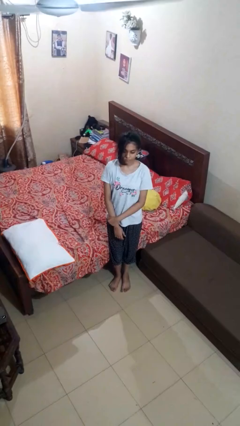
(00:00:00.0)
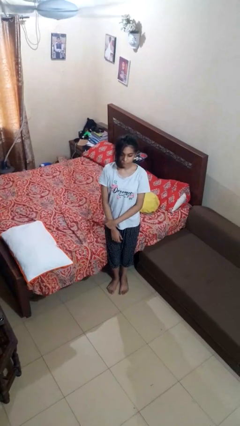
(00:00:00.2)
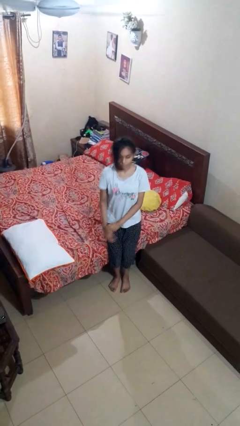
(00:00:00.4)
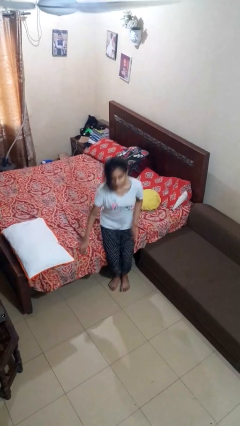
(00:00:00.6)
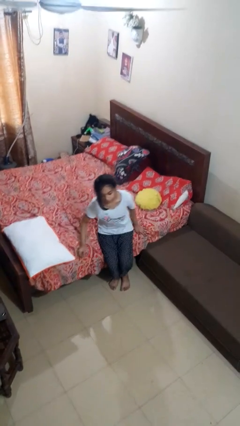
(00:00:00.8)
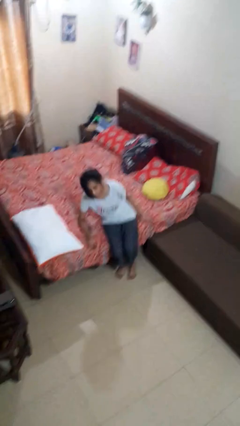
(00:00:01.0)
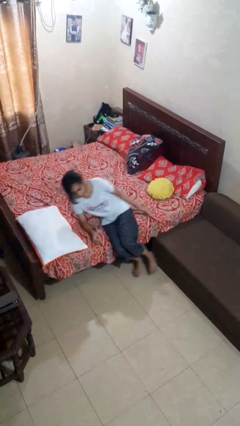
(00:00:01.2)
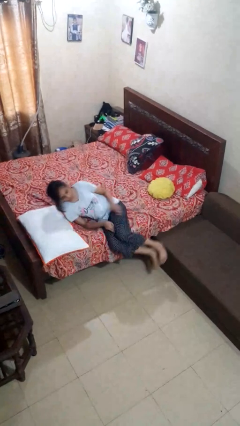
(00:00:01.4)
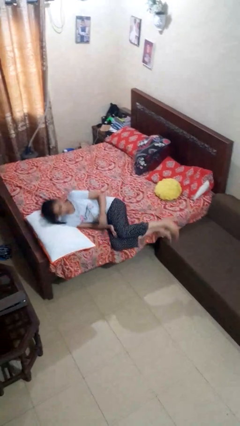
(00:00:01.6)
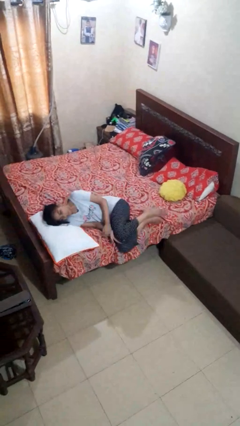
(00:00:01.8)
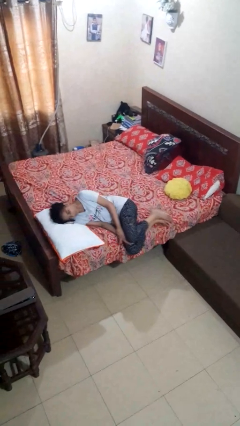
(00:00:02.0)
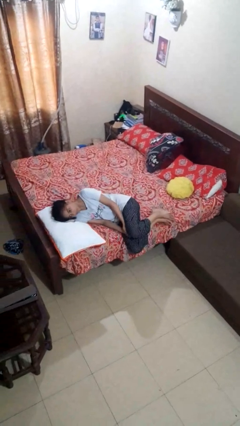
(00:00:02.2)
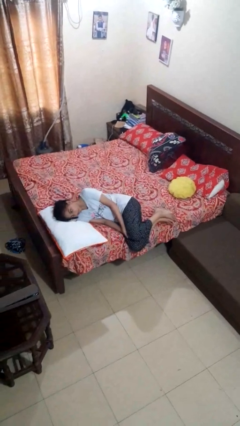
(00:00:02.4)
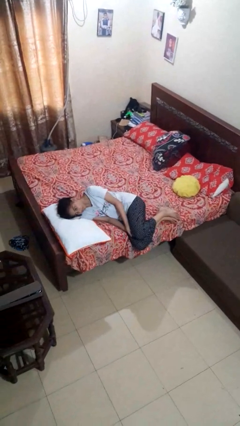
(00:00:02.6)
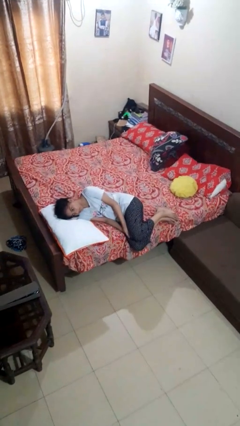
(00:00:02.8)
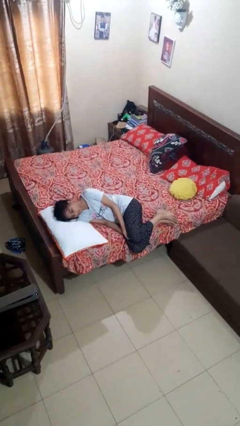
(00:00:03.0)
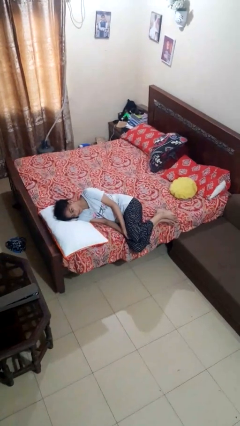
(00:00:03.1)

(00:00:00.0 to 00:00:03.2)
person lies down on bed

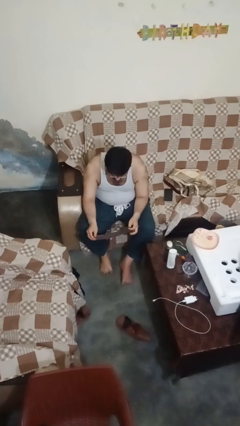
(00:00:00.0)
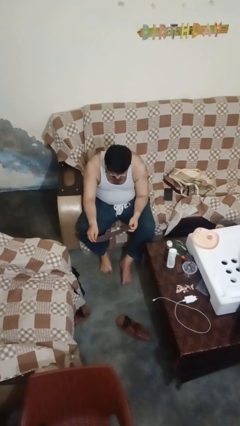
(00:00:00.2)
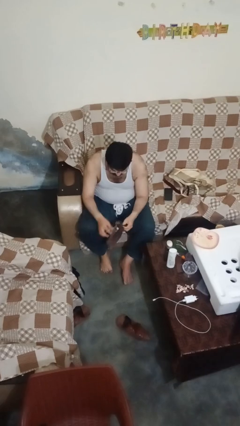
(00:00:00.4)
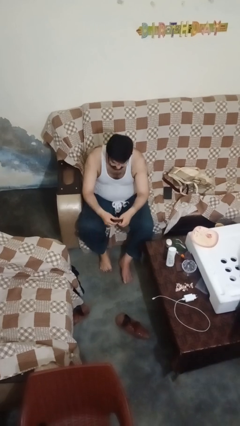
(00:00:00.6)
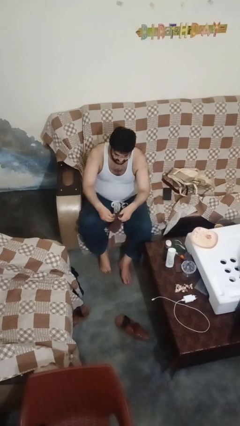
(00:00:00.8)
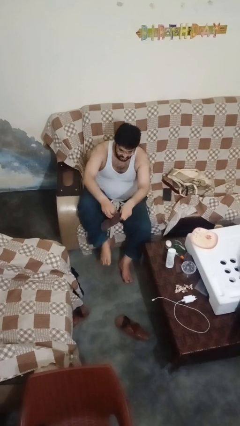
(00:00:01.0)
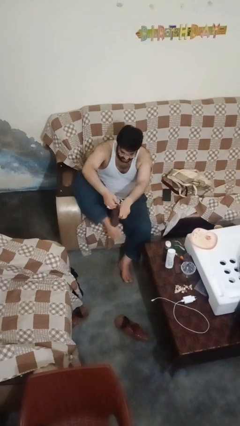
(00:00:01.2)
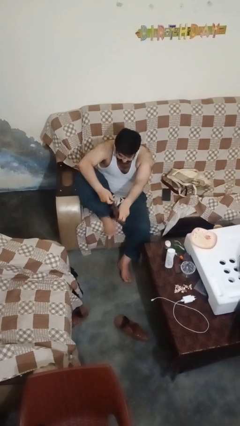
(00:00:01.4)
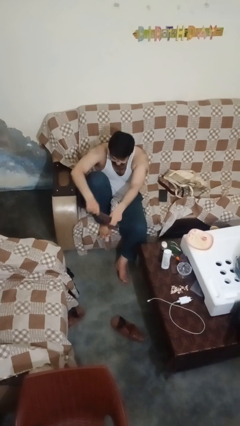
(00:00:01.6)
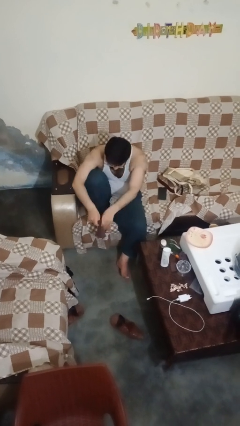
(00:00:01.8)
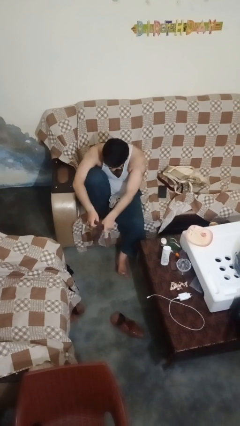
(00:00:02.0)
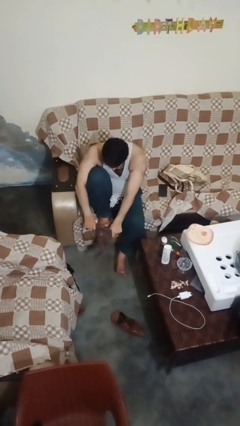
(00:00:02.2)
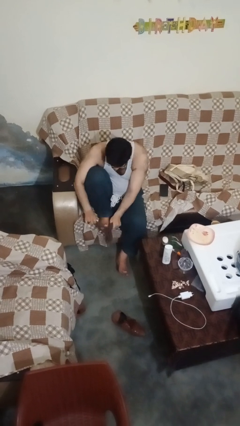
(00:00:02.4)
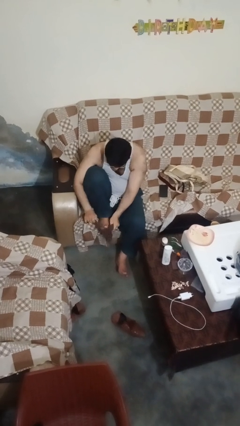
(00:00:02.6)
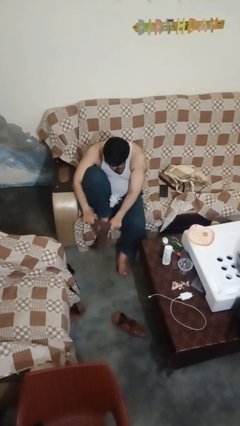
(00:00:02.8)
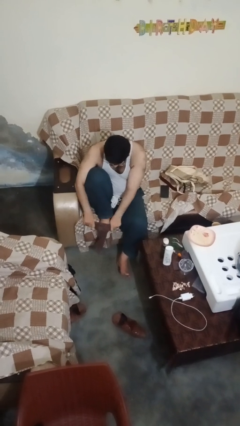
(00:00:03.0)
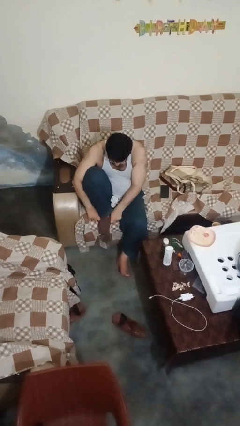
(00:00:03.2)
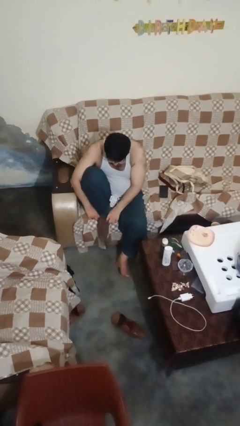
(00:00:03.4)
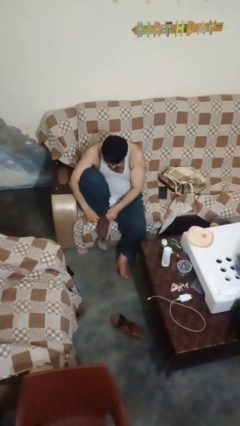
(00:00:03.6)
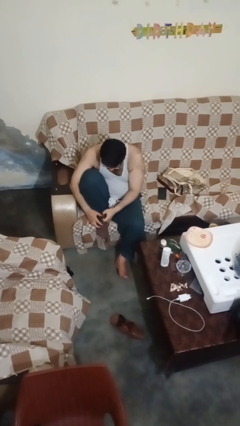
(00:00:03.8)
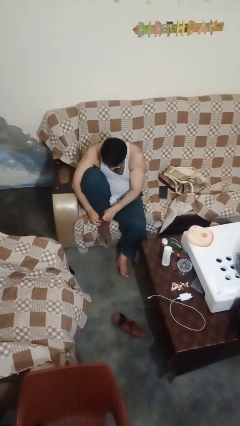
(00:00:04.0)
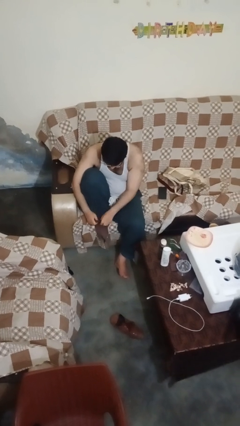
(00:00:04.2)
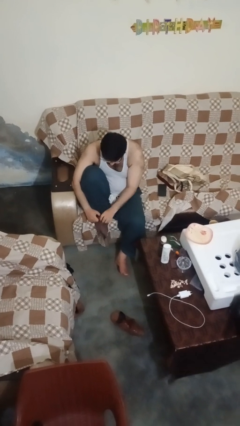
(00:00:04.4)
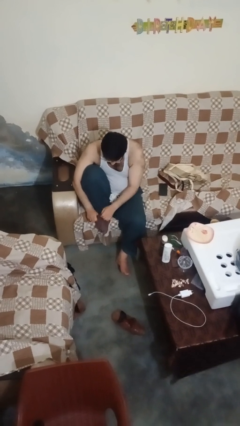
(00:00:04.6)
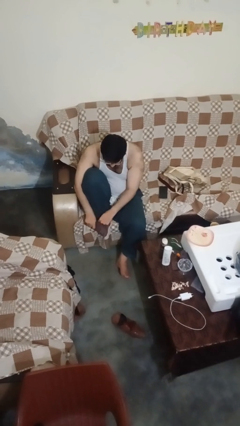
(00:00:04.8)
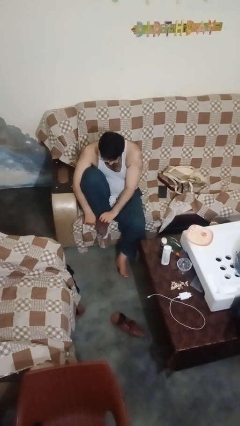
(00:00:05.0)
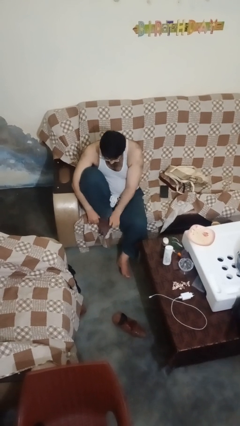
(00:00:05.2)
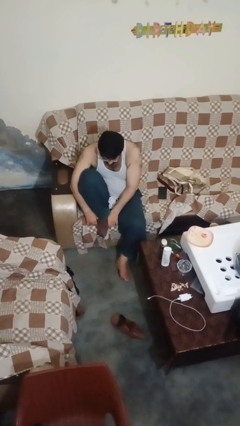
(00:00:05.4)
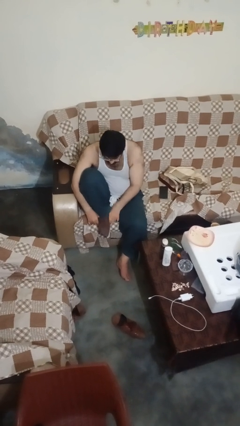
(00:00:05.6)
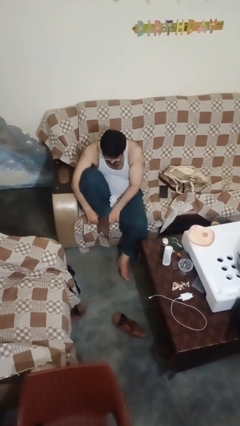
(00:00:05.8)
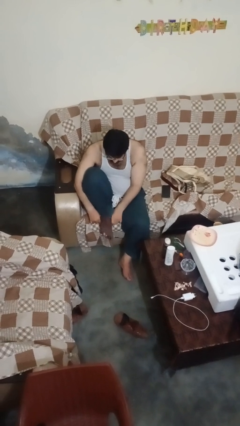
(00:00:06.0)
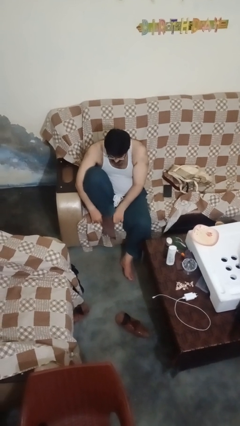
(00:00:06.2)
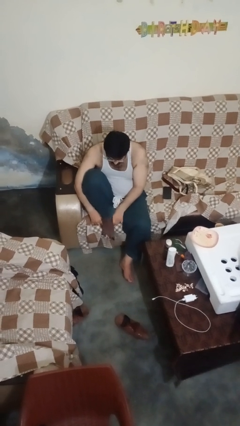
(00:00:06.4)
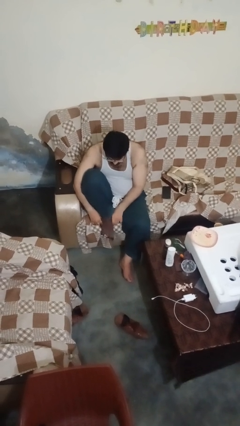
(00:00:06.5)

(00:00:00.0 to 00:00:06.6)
person puts on socks

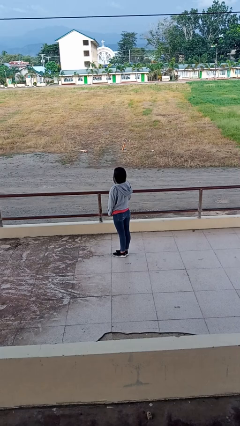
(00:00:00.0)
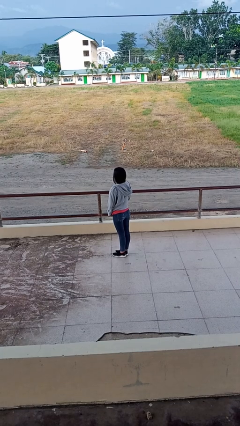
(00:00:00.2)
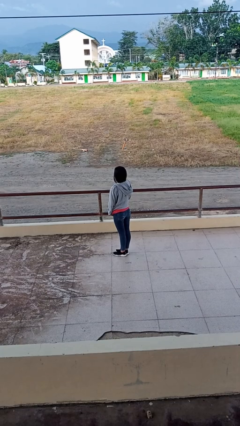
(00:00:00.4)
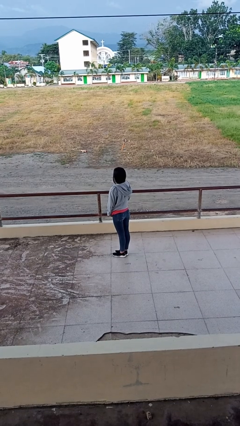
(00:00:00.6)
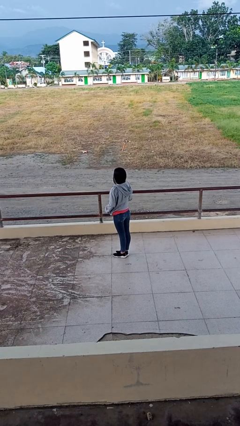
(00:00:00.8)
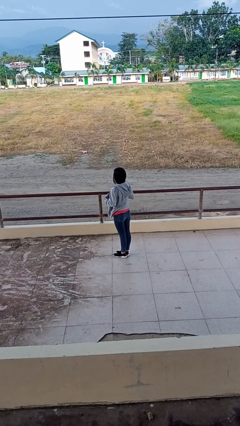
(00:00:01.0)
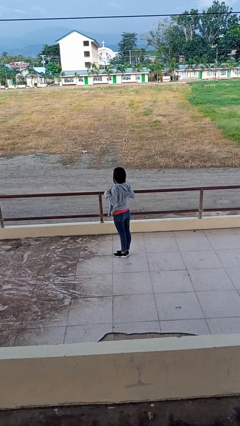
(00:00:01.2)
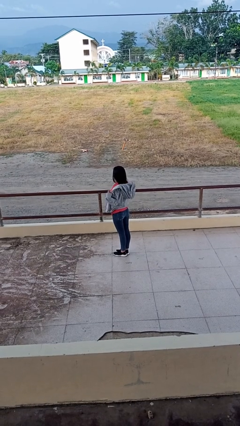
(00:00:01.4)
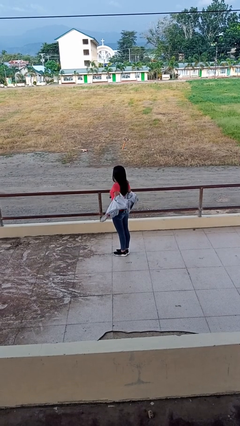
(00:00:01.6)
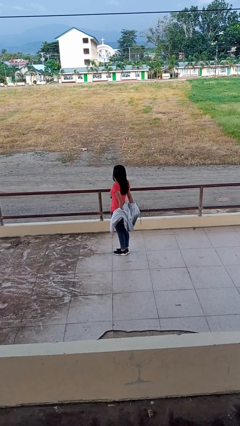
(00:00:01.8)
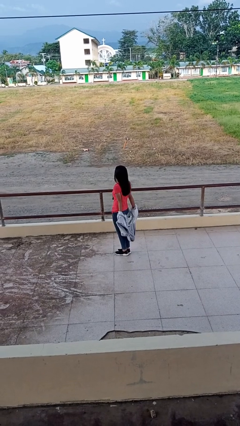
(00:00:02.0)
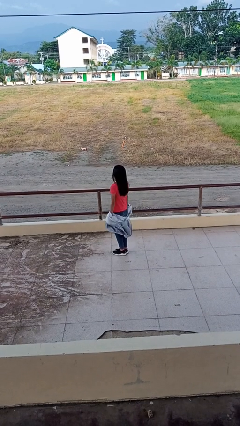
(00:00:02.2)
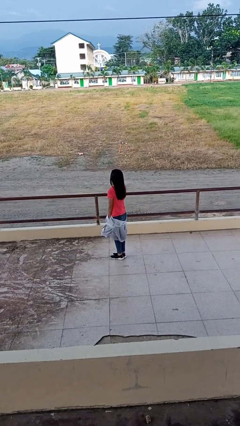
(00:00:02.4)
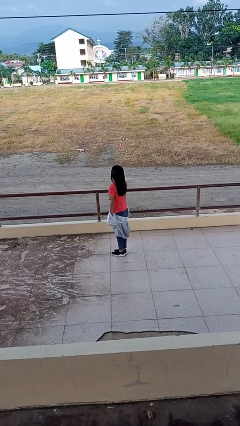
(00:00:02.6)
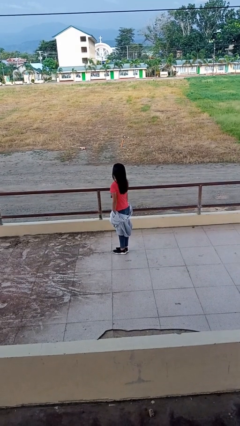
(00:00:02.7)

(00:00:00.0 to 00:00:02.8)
person takes off jacket

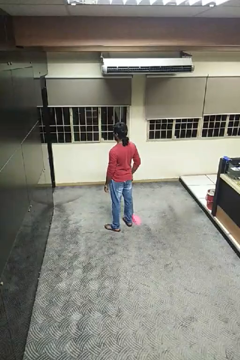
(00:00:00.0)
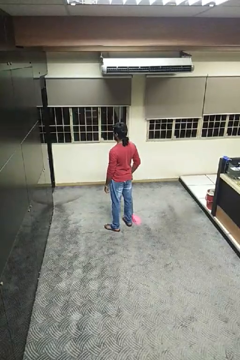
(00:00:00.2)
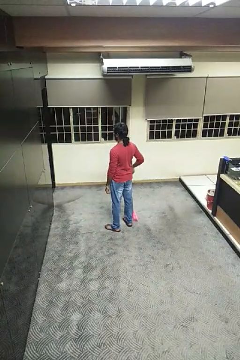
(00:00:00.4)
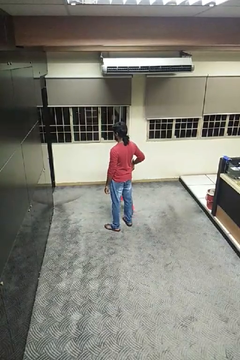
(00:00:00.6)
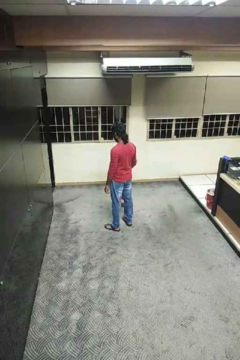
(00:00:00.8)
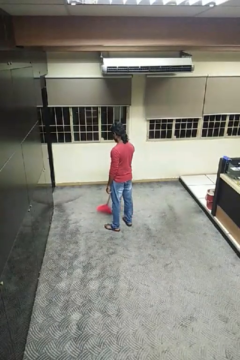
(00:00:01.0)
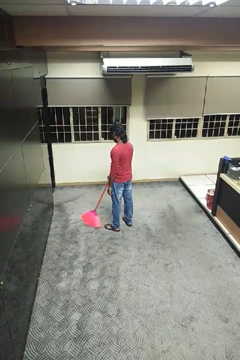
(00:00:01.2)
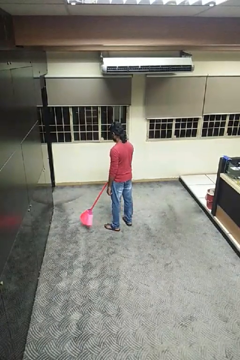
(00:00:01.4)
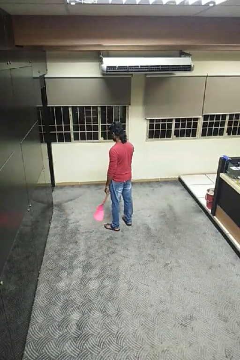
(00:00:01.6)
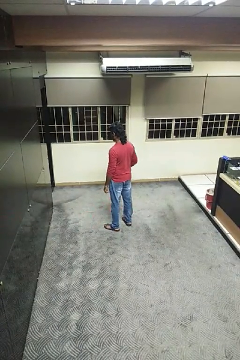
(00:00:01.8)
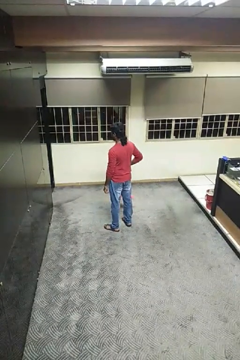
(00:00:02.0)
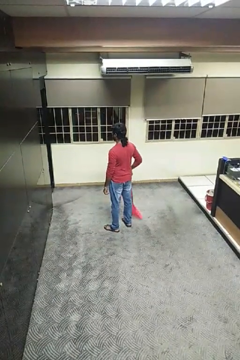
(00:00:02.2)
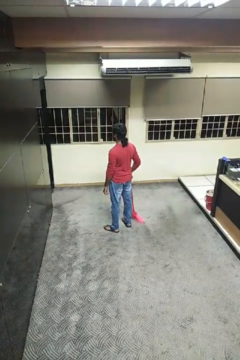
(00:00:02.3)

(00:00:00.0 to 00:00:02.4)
person sweeps floor

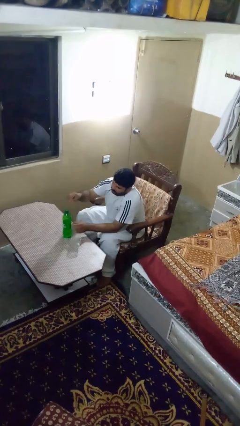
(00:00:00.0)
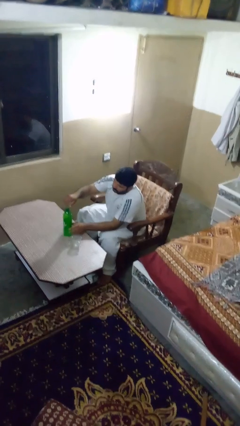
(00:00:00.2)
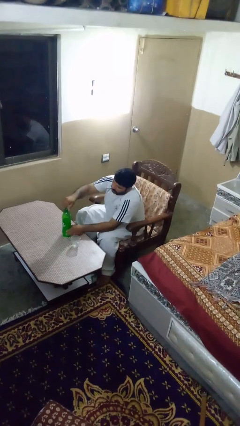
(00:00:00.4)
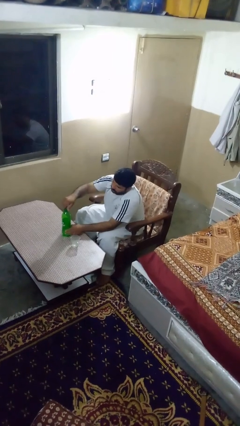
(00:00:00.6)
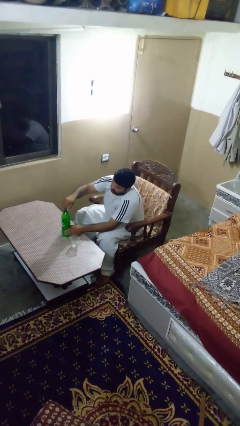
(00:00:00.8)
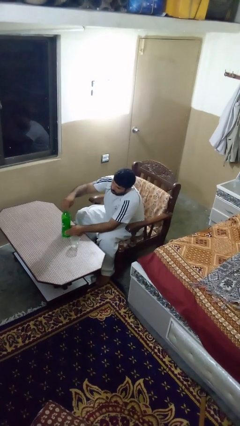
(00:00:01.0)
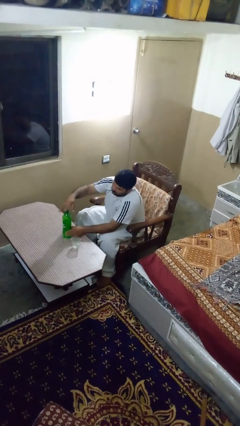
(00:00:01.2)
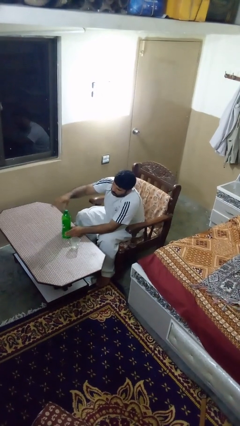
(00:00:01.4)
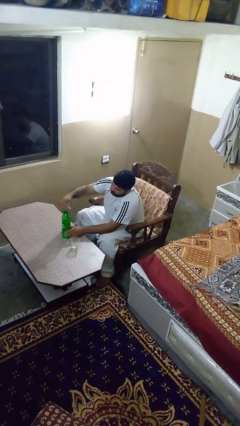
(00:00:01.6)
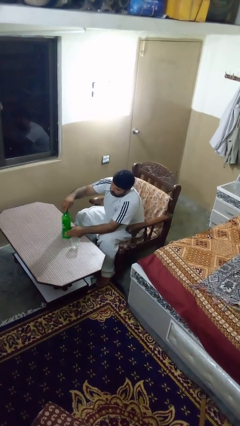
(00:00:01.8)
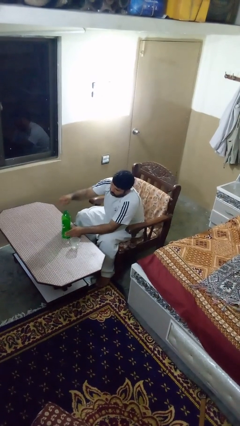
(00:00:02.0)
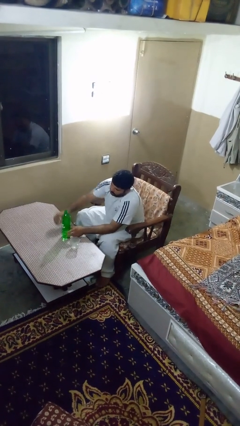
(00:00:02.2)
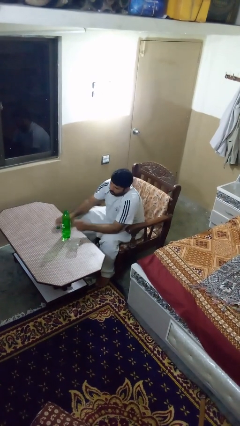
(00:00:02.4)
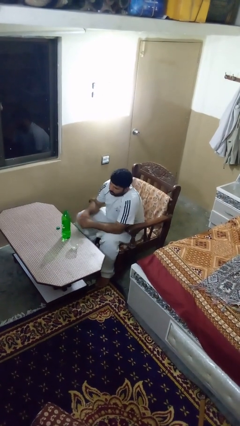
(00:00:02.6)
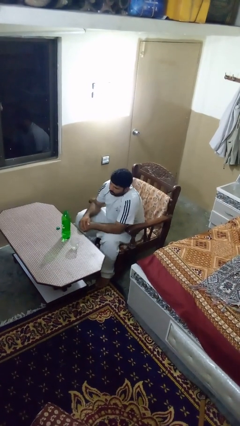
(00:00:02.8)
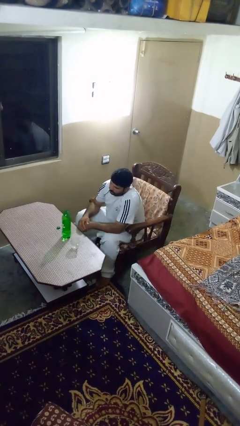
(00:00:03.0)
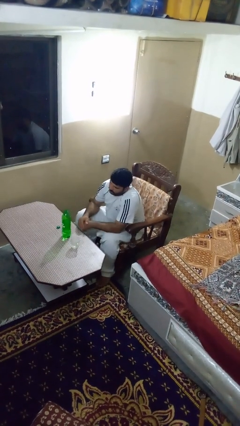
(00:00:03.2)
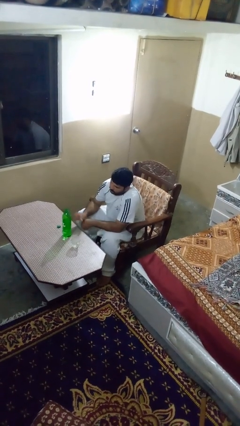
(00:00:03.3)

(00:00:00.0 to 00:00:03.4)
person unscrews lid from bottle
